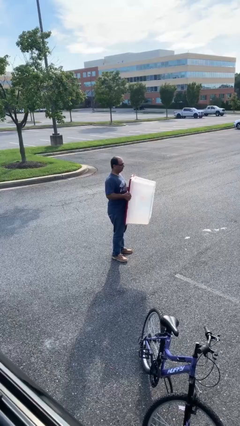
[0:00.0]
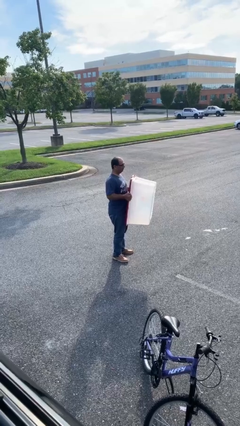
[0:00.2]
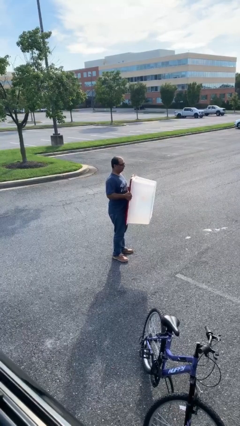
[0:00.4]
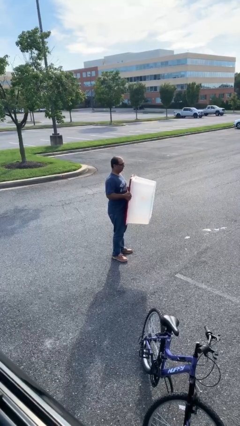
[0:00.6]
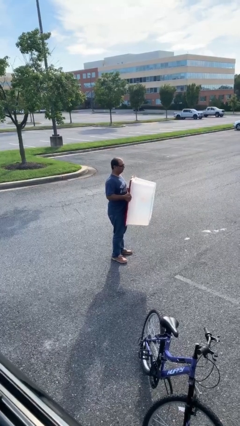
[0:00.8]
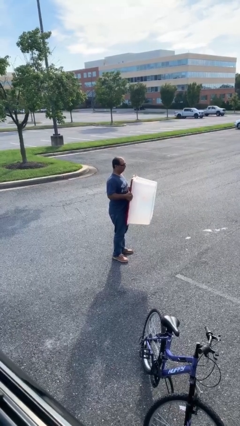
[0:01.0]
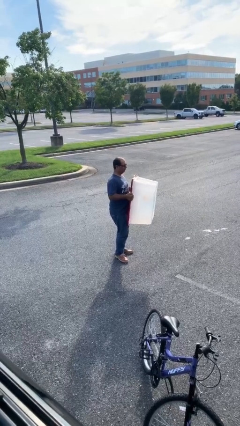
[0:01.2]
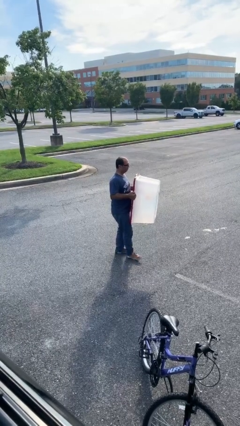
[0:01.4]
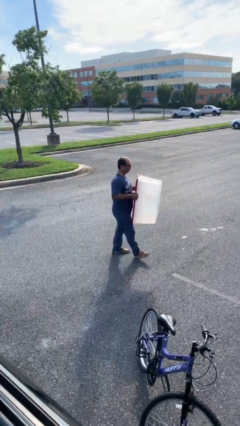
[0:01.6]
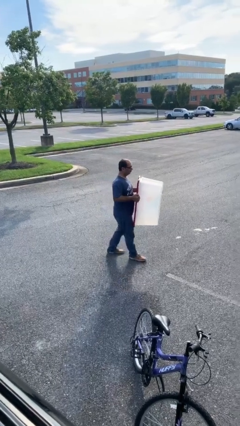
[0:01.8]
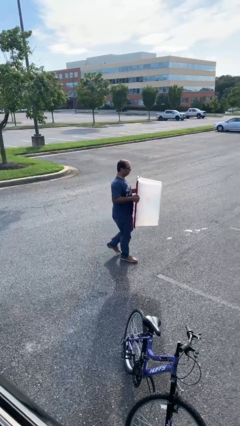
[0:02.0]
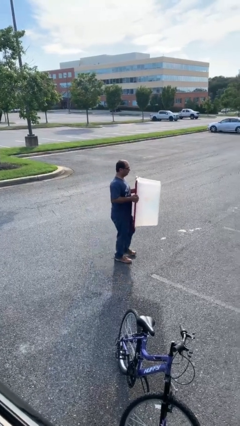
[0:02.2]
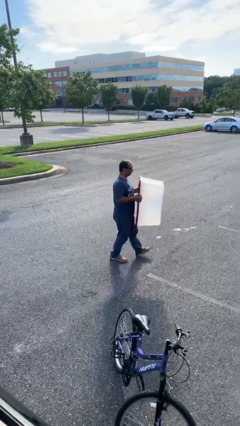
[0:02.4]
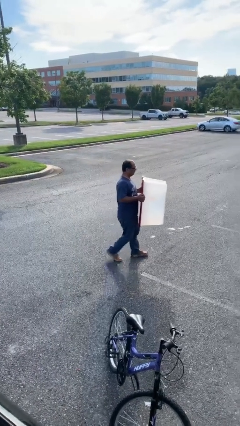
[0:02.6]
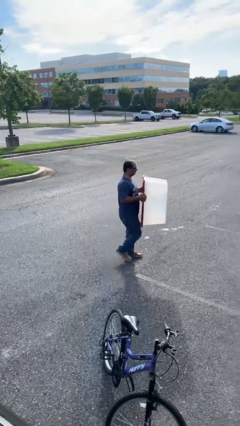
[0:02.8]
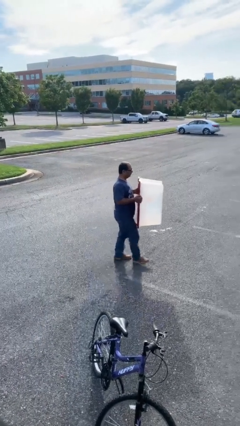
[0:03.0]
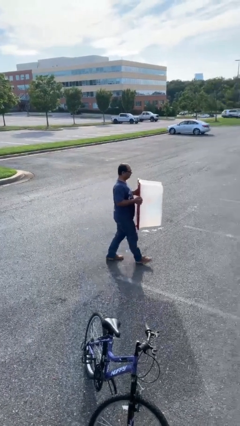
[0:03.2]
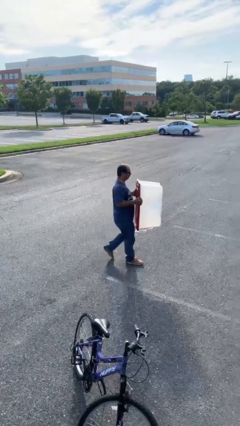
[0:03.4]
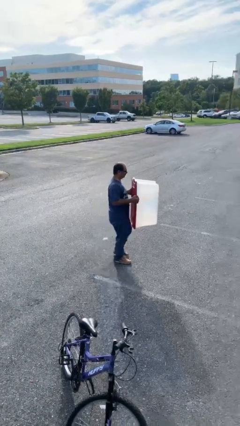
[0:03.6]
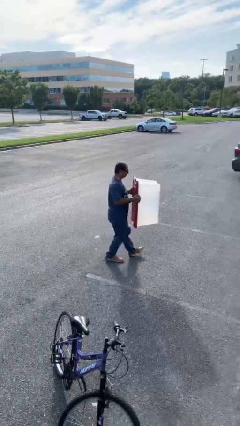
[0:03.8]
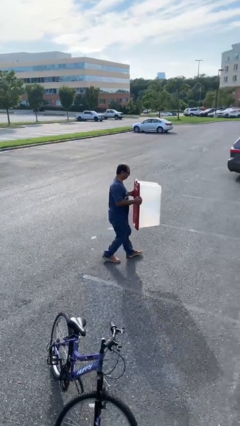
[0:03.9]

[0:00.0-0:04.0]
person carries heavy object

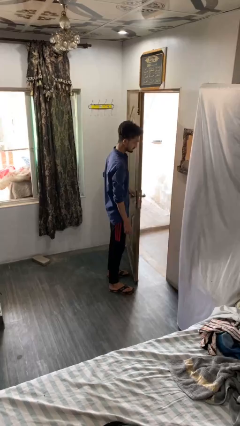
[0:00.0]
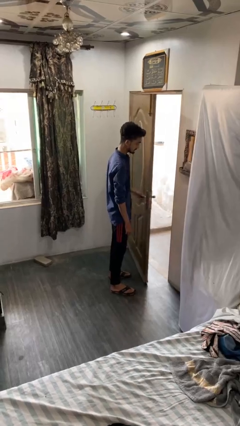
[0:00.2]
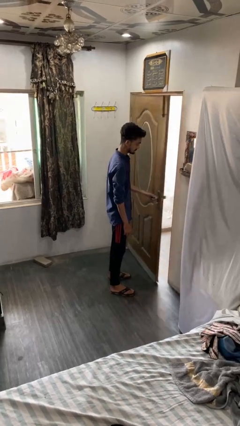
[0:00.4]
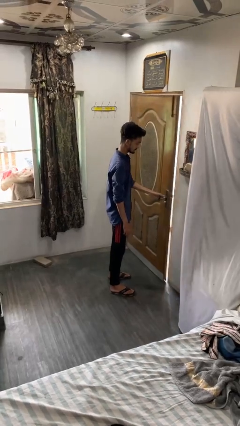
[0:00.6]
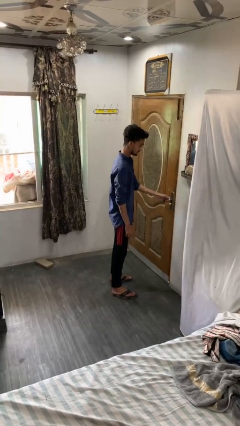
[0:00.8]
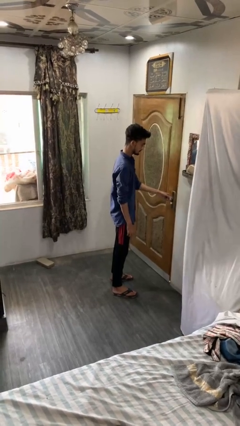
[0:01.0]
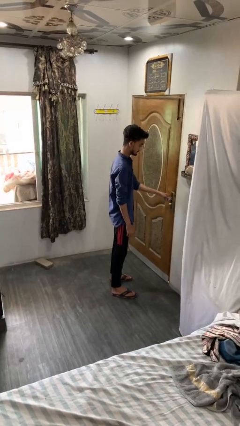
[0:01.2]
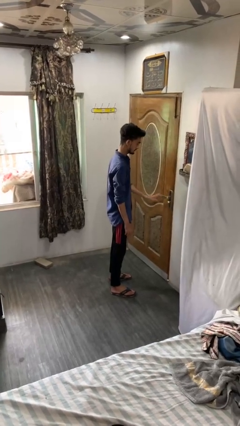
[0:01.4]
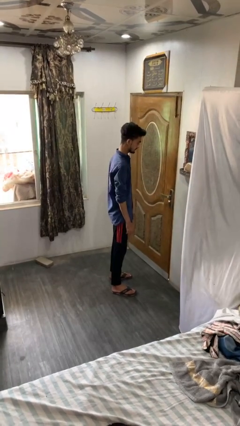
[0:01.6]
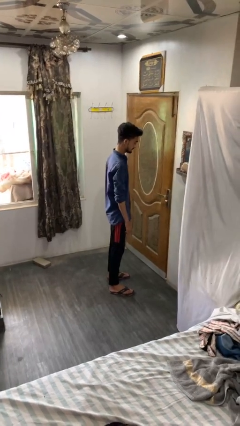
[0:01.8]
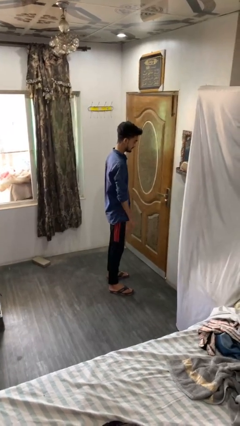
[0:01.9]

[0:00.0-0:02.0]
person closes facility door

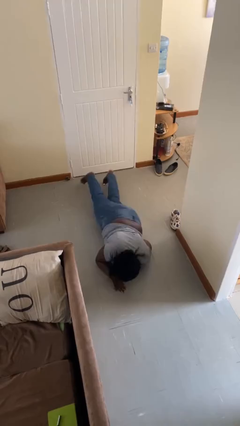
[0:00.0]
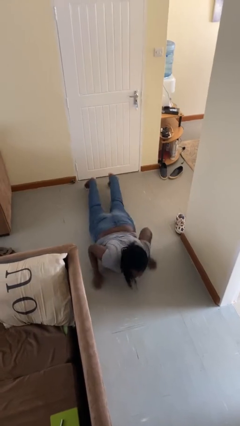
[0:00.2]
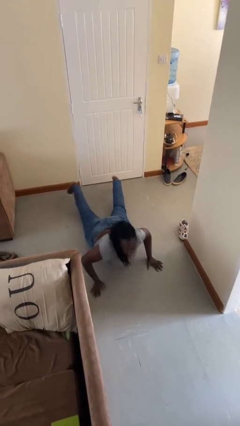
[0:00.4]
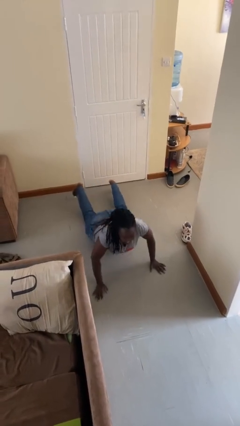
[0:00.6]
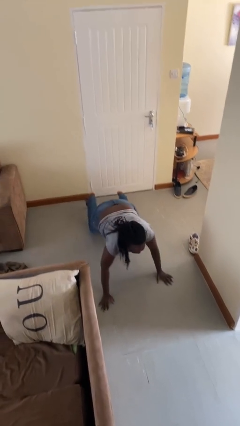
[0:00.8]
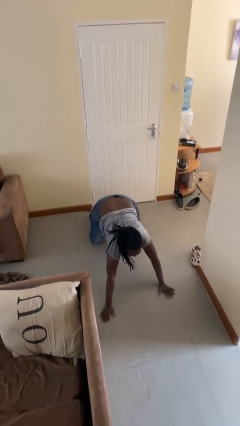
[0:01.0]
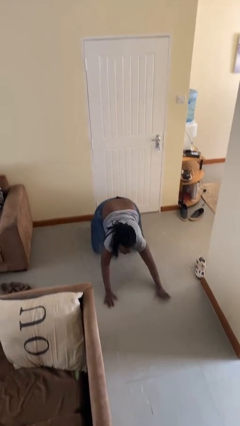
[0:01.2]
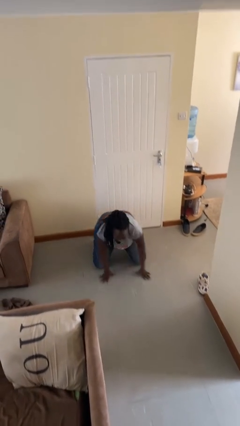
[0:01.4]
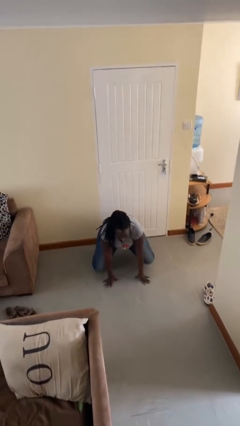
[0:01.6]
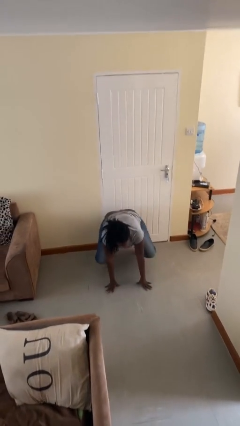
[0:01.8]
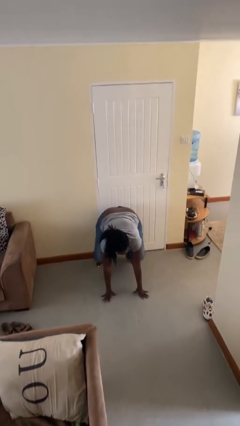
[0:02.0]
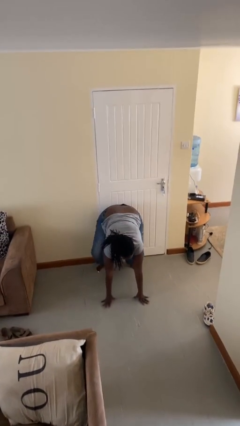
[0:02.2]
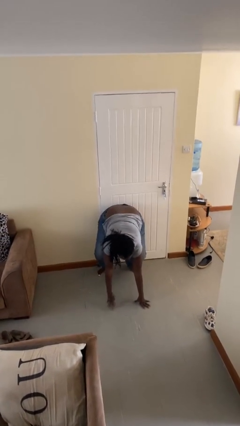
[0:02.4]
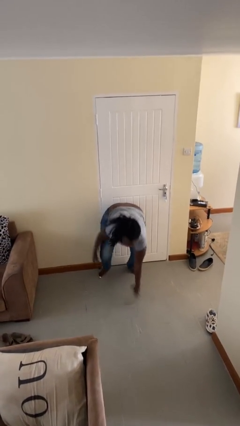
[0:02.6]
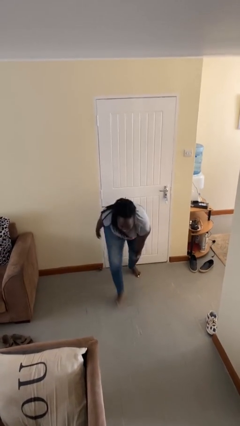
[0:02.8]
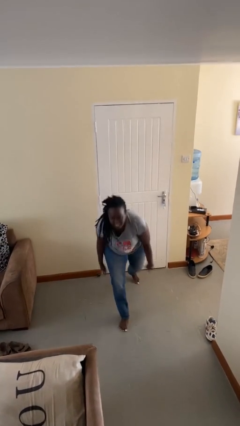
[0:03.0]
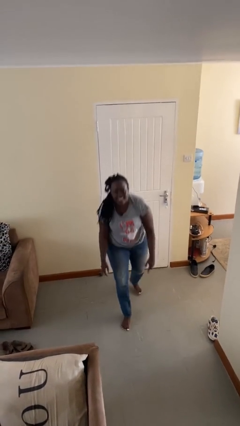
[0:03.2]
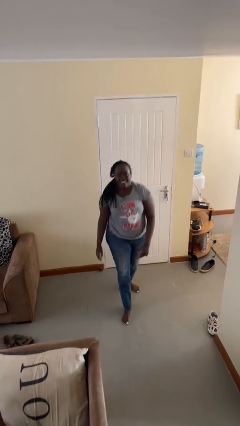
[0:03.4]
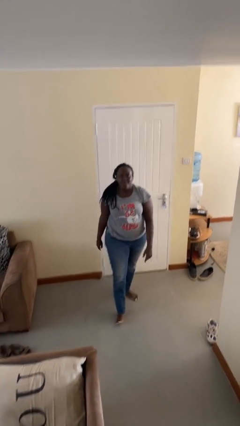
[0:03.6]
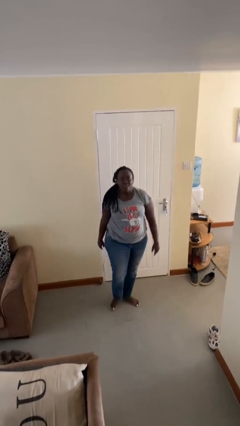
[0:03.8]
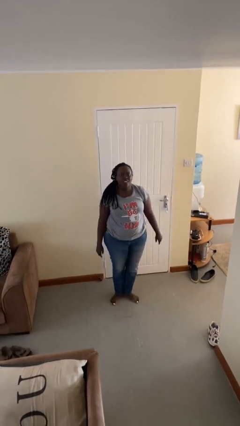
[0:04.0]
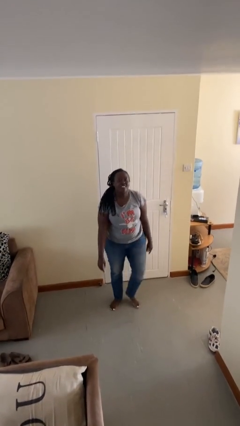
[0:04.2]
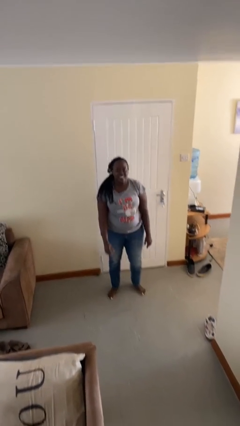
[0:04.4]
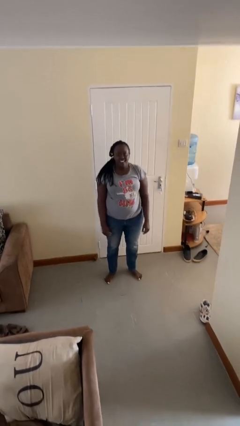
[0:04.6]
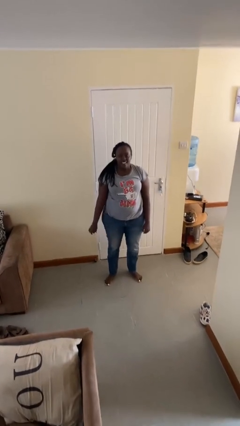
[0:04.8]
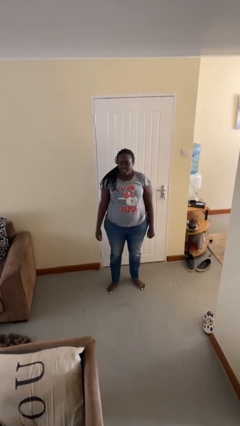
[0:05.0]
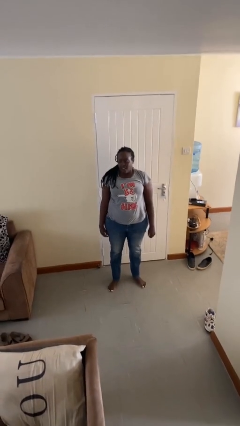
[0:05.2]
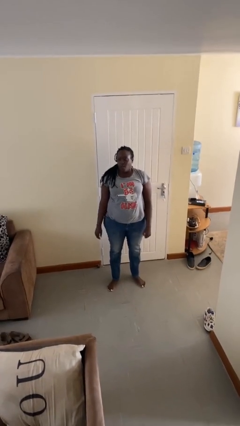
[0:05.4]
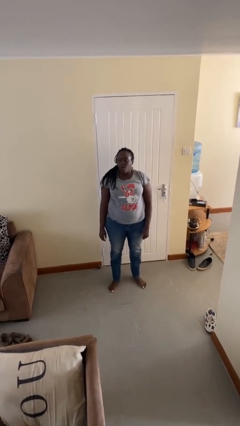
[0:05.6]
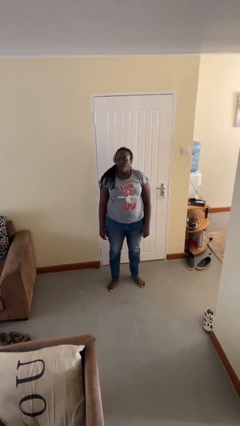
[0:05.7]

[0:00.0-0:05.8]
person stands up from floor

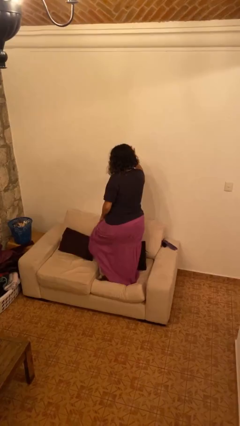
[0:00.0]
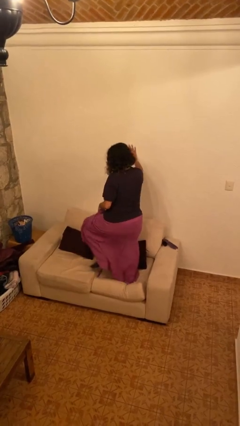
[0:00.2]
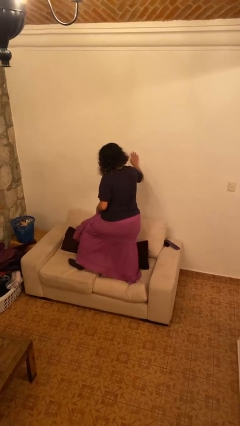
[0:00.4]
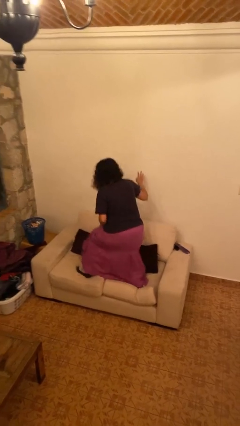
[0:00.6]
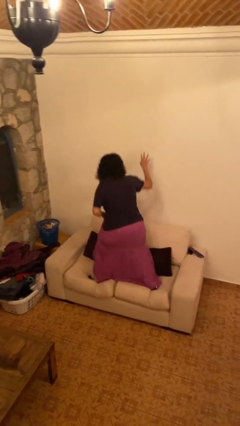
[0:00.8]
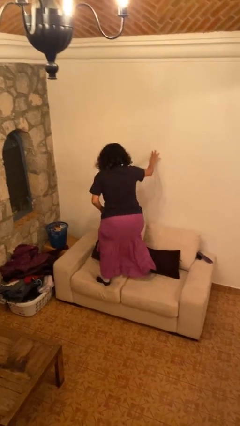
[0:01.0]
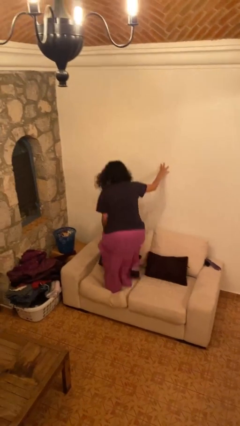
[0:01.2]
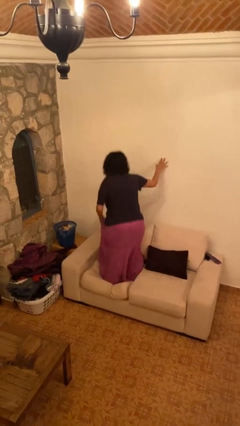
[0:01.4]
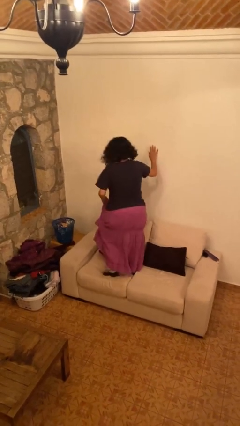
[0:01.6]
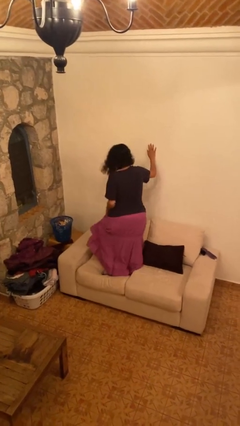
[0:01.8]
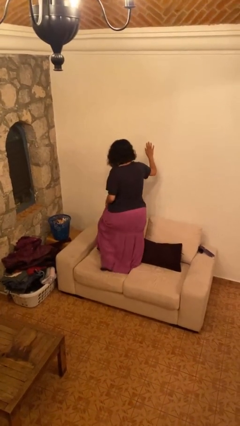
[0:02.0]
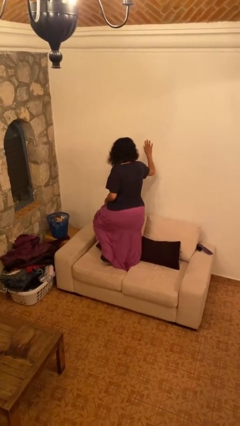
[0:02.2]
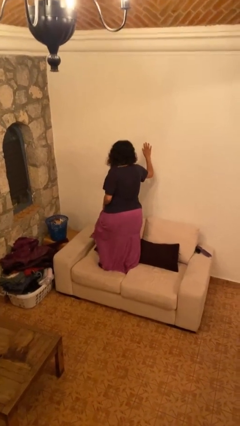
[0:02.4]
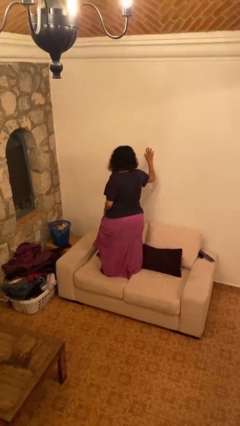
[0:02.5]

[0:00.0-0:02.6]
person jumps on couch

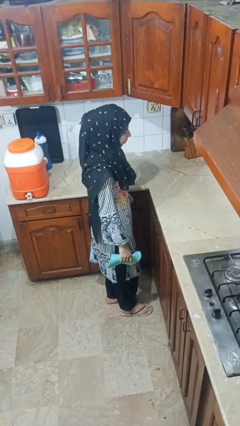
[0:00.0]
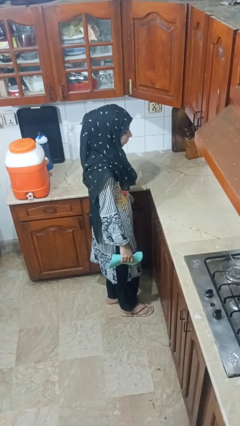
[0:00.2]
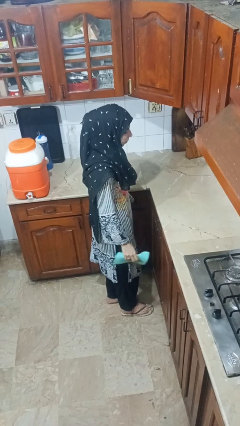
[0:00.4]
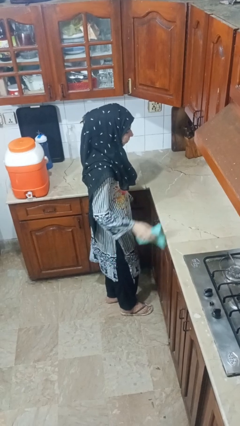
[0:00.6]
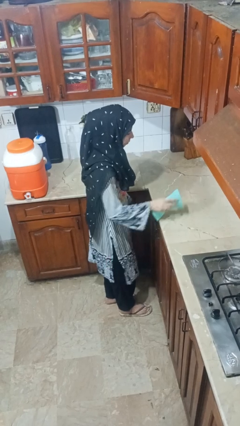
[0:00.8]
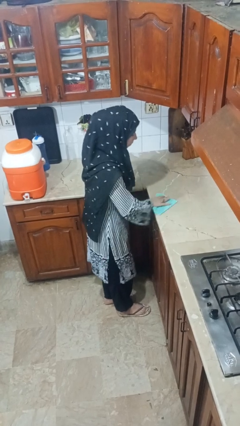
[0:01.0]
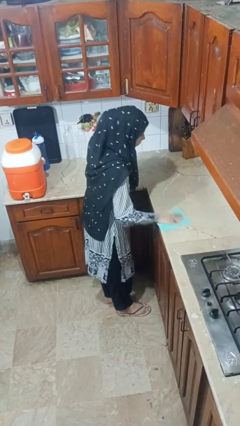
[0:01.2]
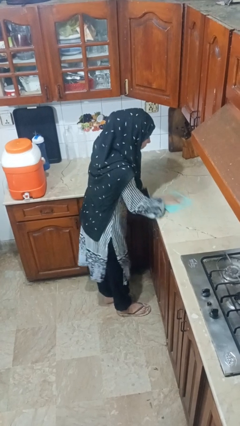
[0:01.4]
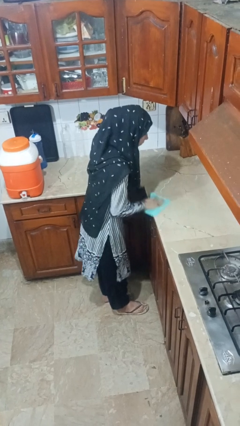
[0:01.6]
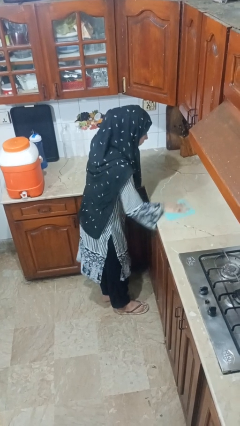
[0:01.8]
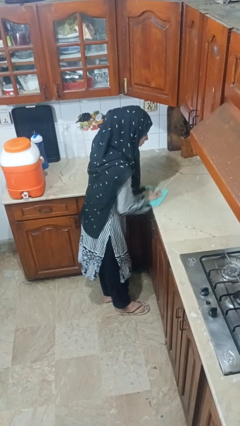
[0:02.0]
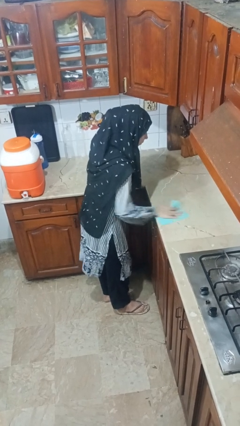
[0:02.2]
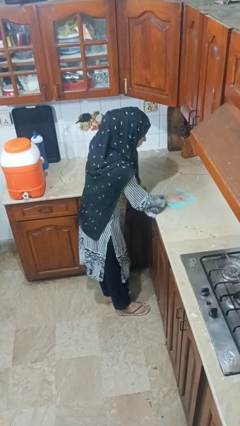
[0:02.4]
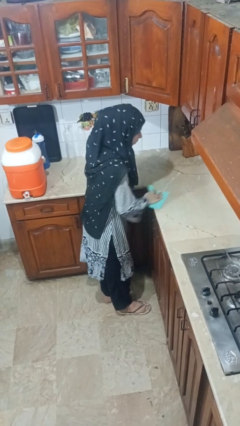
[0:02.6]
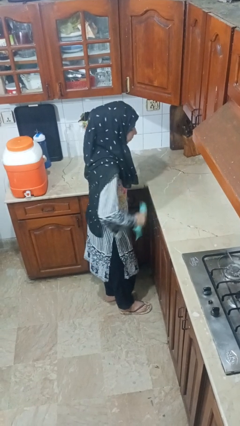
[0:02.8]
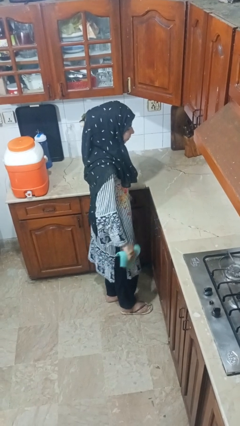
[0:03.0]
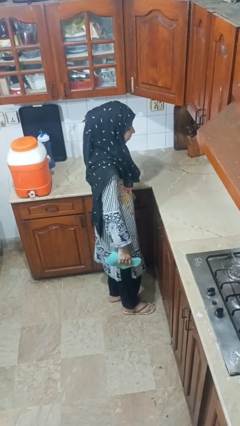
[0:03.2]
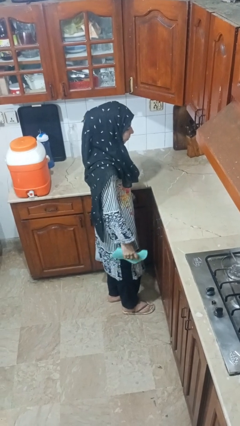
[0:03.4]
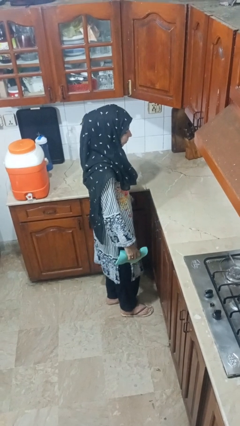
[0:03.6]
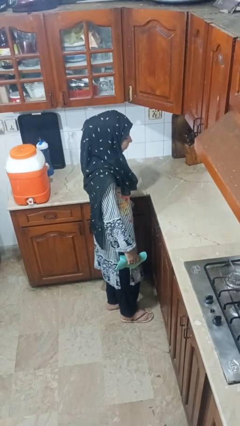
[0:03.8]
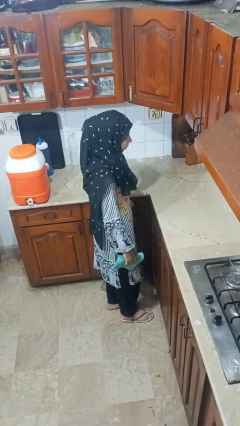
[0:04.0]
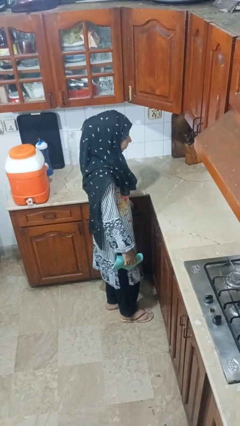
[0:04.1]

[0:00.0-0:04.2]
person cleans table with rag
